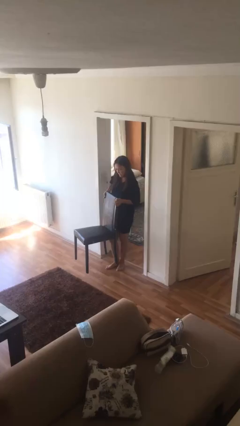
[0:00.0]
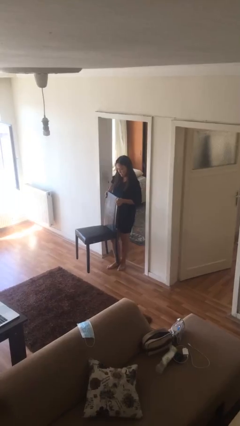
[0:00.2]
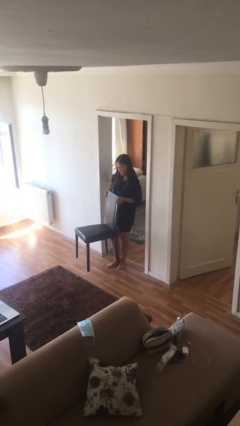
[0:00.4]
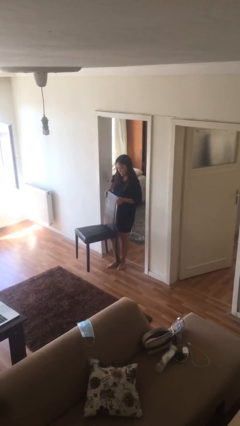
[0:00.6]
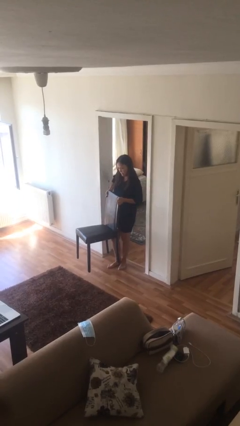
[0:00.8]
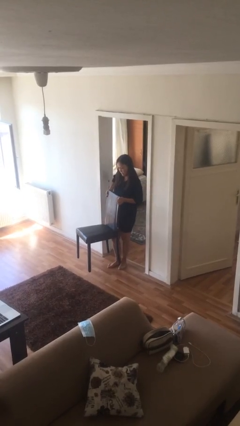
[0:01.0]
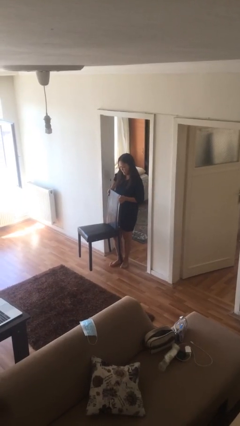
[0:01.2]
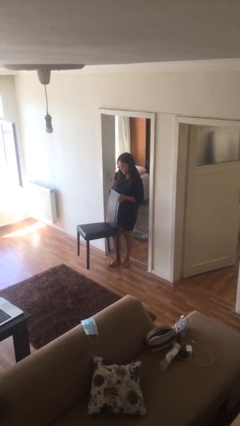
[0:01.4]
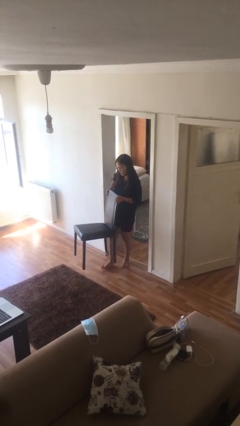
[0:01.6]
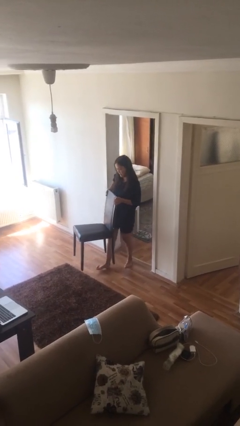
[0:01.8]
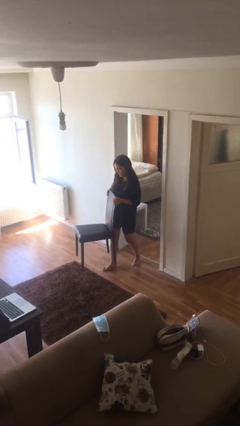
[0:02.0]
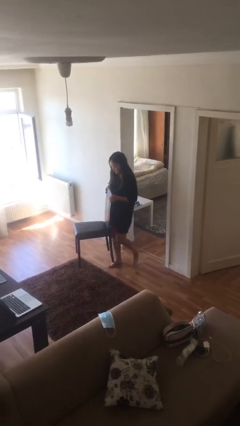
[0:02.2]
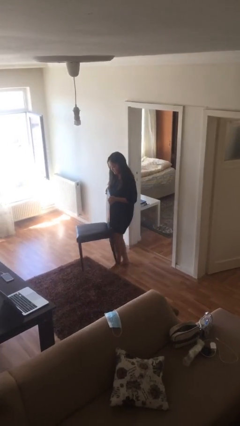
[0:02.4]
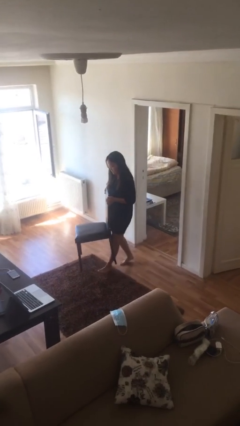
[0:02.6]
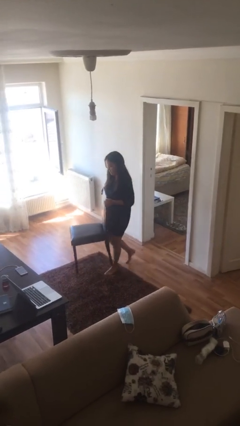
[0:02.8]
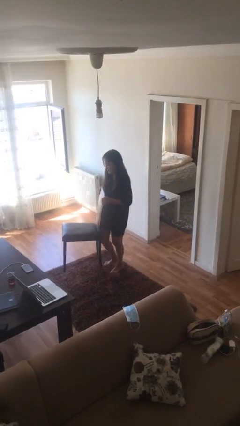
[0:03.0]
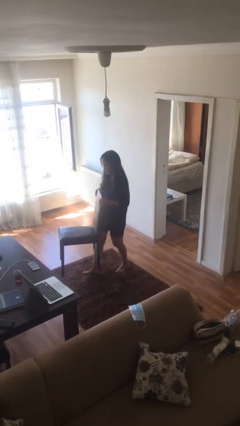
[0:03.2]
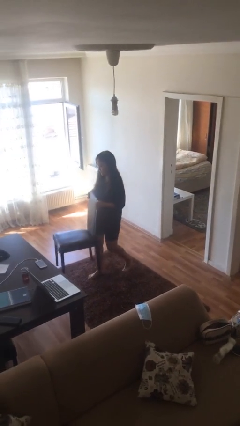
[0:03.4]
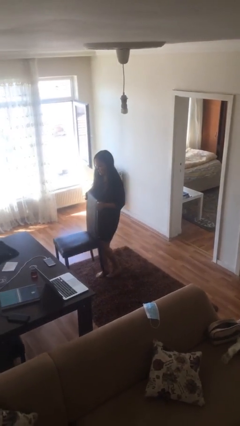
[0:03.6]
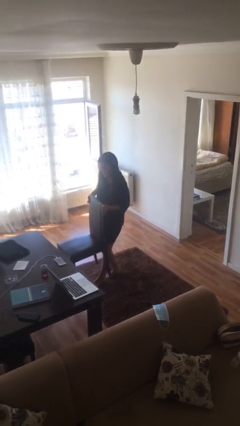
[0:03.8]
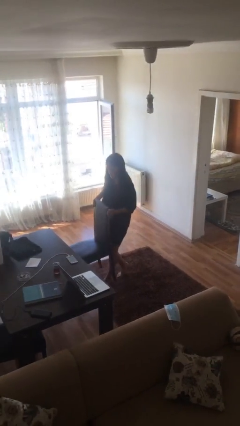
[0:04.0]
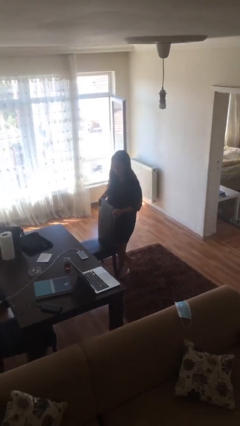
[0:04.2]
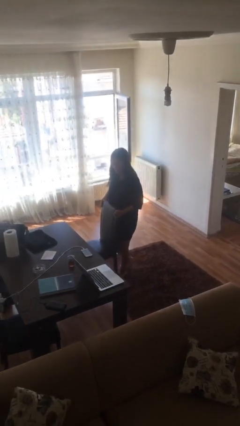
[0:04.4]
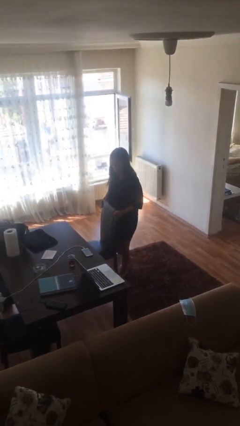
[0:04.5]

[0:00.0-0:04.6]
person carries heavy object

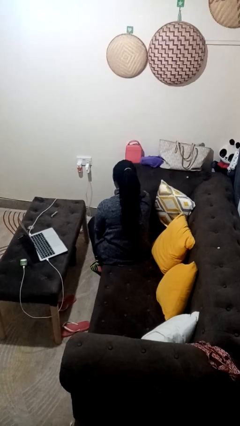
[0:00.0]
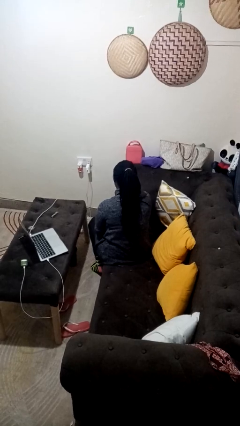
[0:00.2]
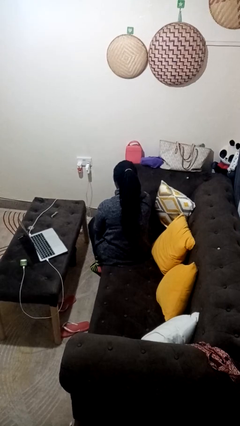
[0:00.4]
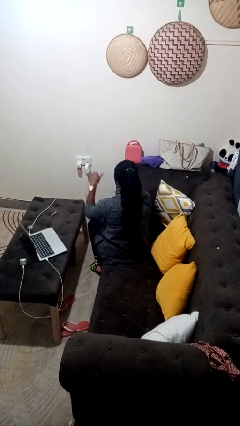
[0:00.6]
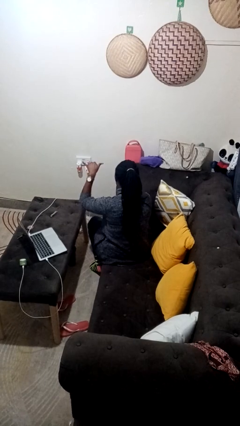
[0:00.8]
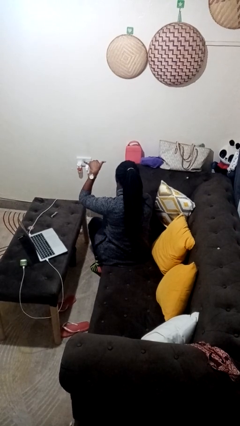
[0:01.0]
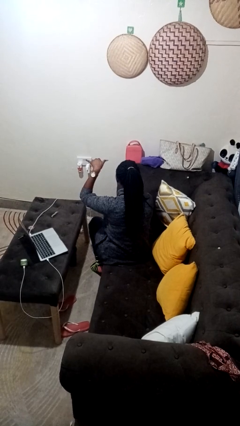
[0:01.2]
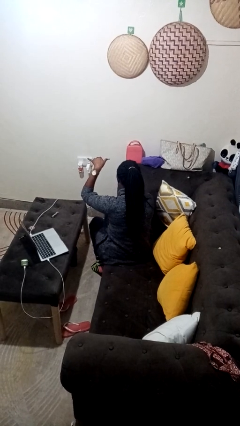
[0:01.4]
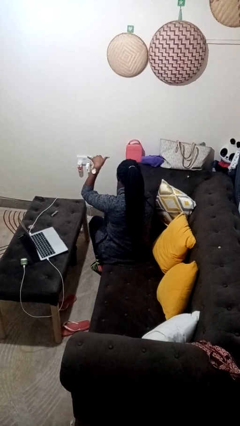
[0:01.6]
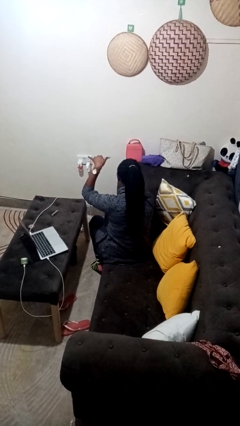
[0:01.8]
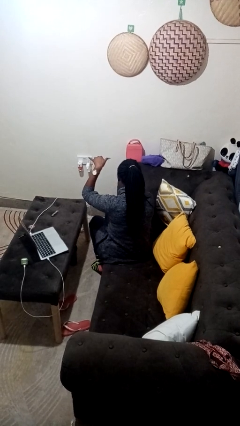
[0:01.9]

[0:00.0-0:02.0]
person gestures hang loose

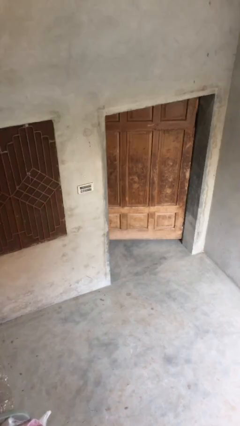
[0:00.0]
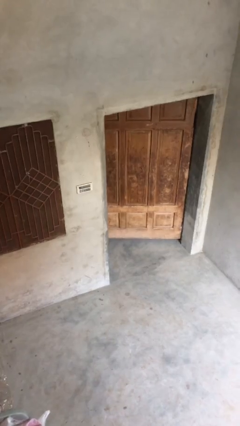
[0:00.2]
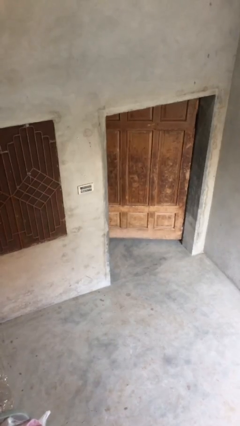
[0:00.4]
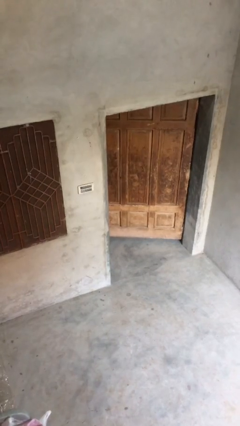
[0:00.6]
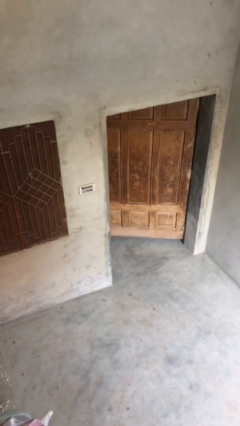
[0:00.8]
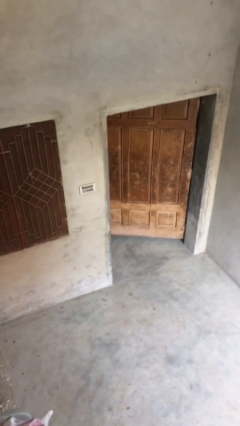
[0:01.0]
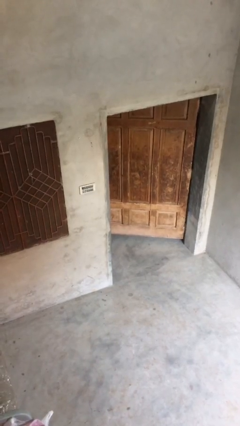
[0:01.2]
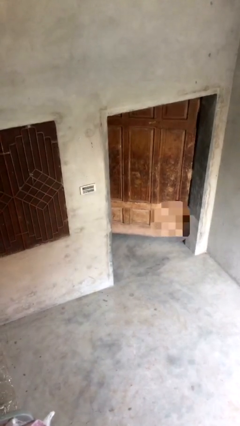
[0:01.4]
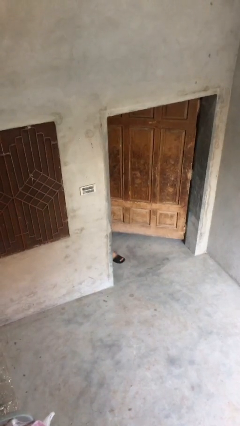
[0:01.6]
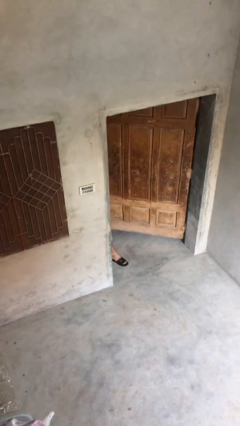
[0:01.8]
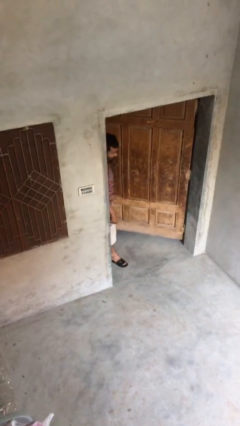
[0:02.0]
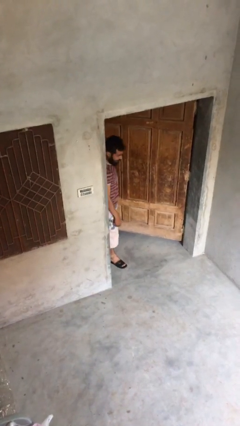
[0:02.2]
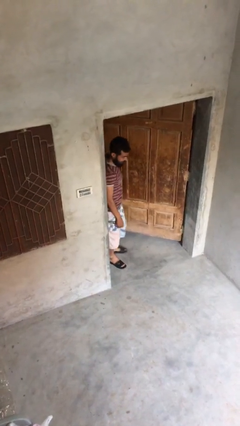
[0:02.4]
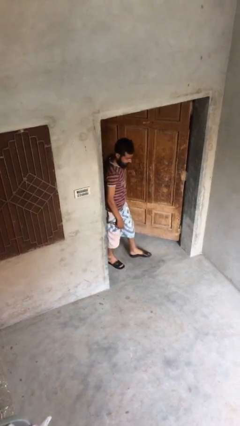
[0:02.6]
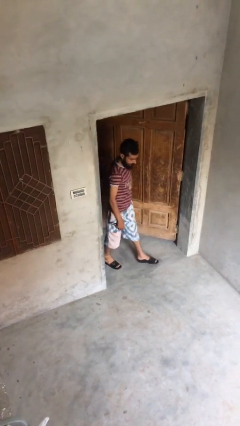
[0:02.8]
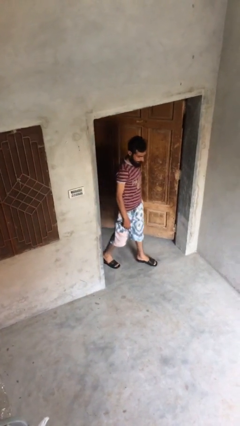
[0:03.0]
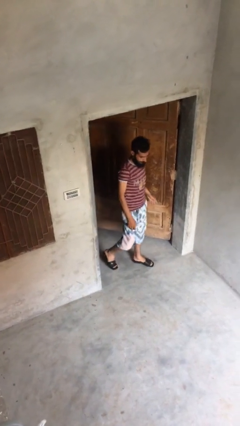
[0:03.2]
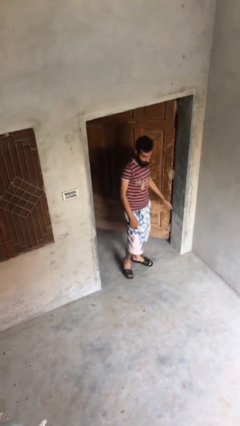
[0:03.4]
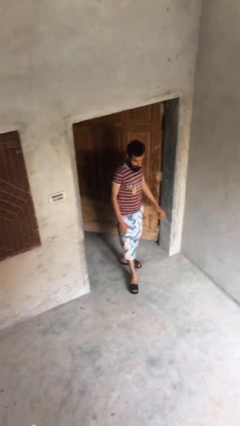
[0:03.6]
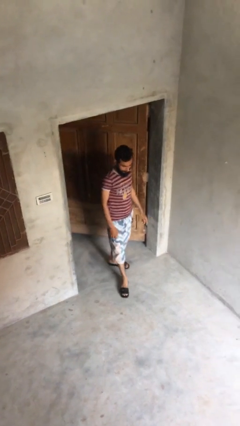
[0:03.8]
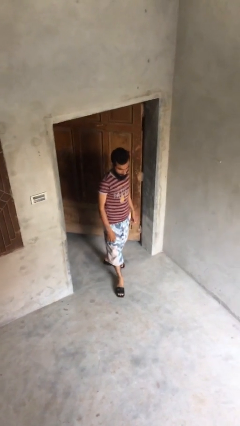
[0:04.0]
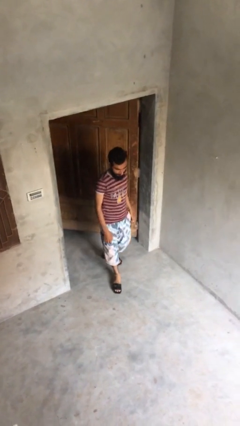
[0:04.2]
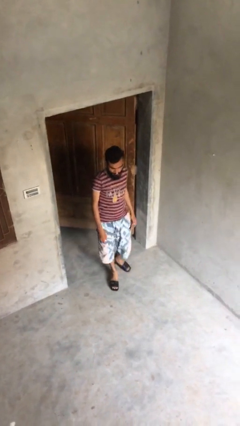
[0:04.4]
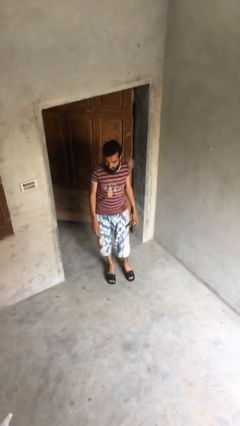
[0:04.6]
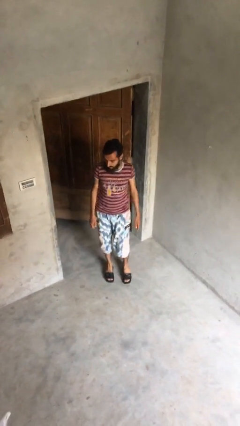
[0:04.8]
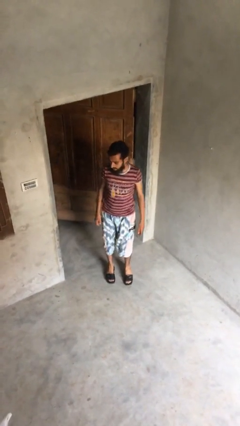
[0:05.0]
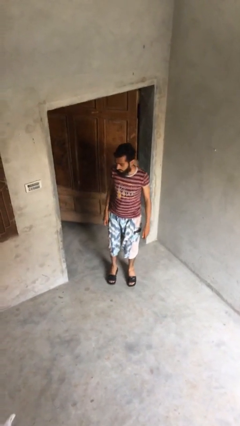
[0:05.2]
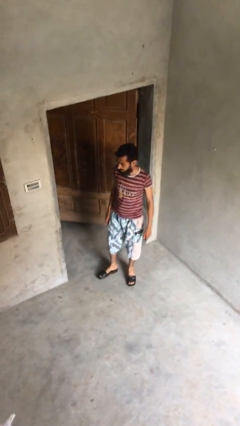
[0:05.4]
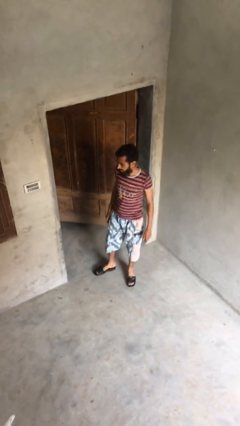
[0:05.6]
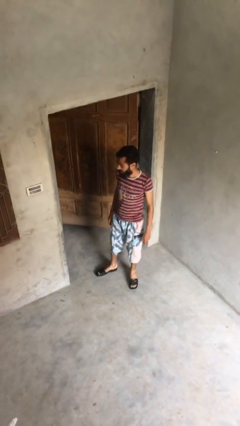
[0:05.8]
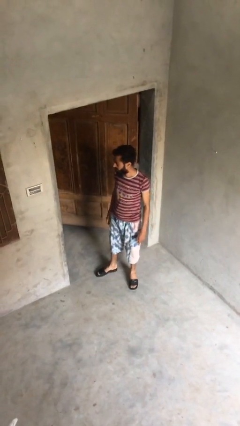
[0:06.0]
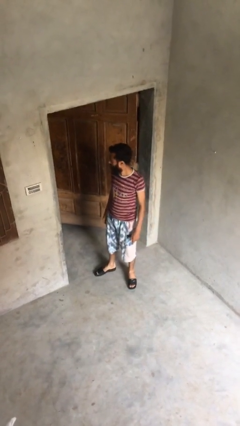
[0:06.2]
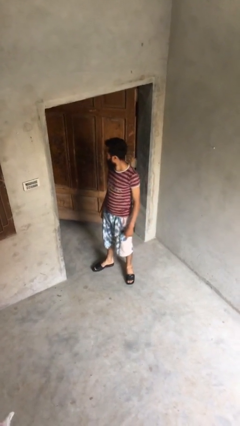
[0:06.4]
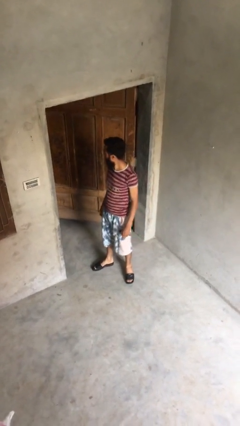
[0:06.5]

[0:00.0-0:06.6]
person enters scene through structure

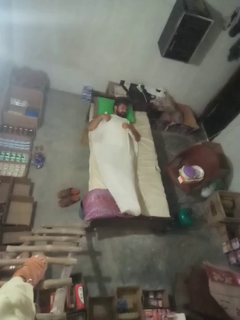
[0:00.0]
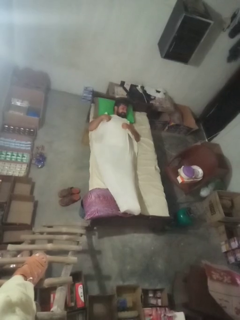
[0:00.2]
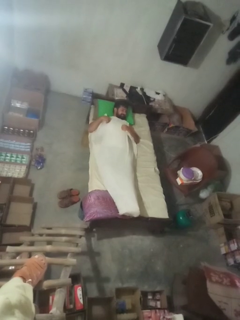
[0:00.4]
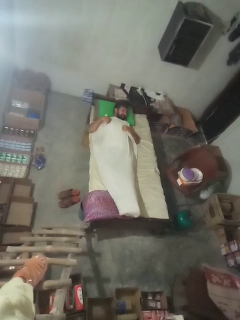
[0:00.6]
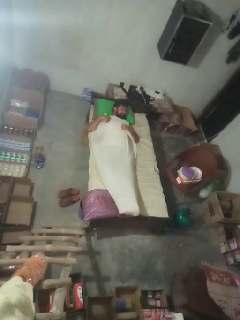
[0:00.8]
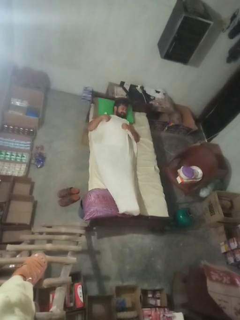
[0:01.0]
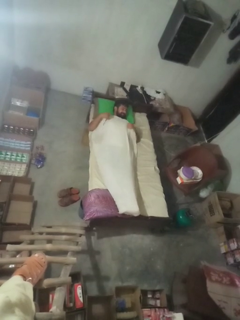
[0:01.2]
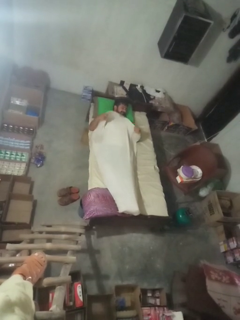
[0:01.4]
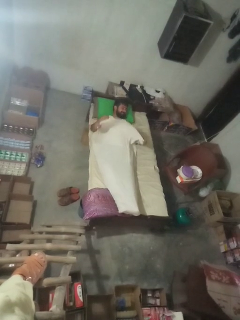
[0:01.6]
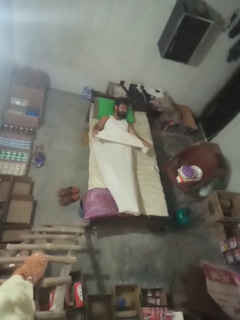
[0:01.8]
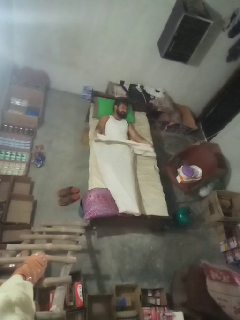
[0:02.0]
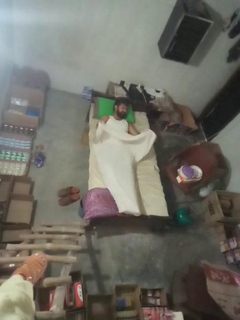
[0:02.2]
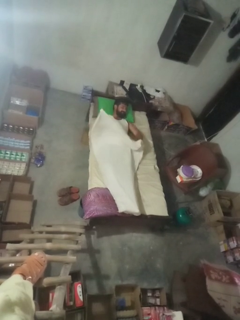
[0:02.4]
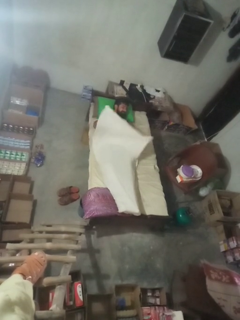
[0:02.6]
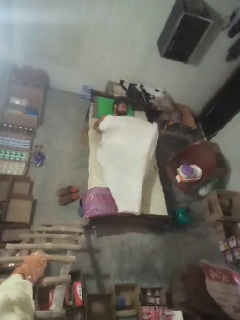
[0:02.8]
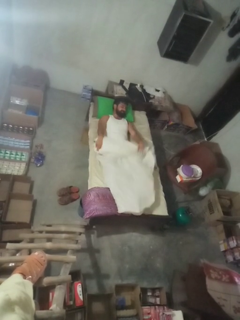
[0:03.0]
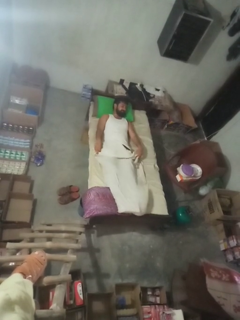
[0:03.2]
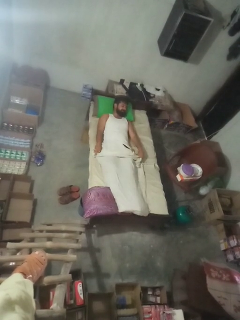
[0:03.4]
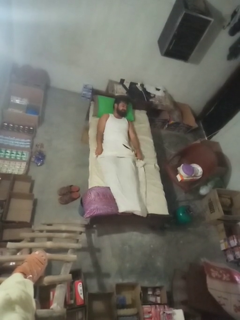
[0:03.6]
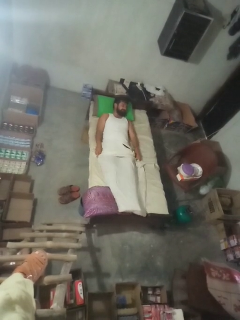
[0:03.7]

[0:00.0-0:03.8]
person uncovers with bedsheets

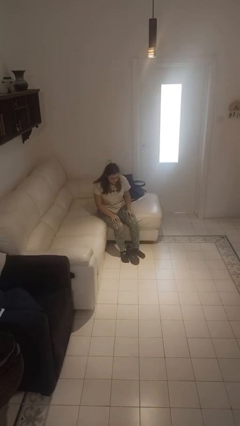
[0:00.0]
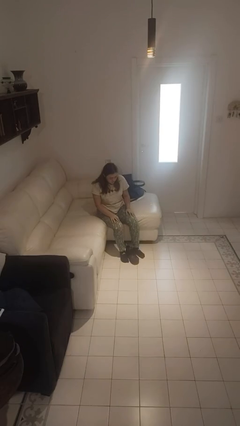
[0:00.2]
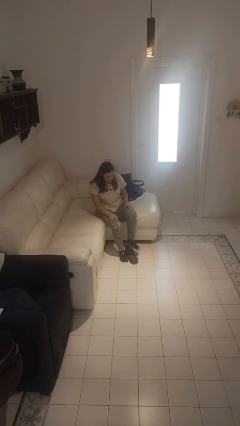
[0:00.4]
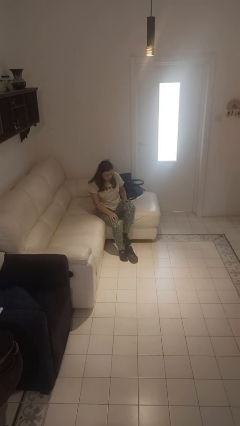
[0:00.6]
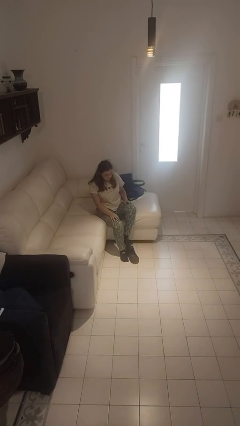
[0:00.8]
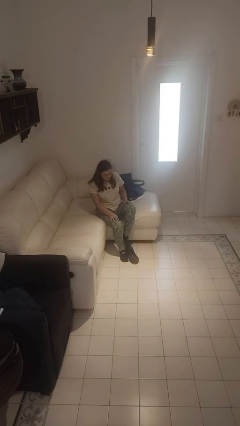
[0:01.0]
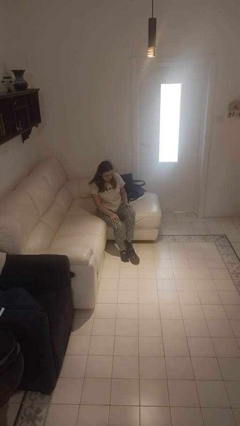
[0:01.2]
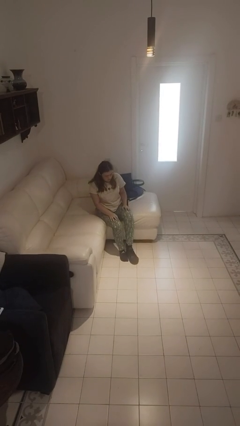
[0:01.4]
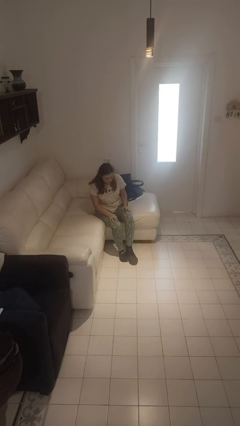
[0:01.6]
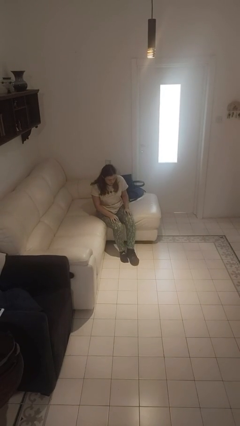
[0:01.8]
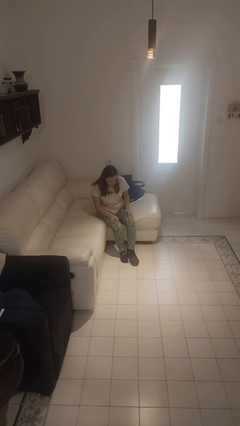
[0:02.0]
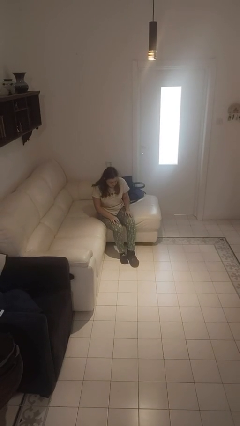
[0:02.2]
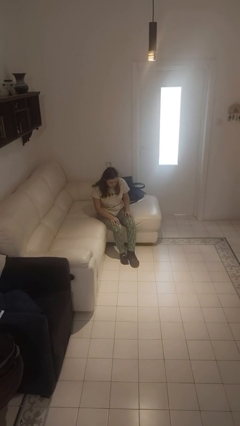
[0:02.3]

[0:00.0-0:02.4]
person puts on shoes
